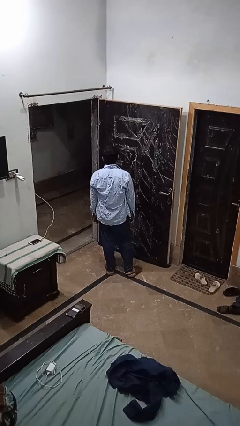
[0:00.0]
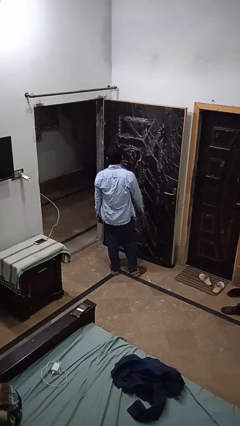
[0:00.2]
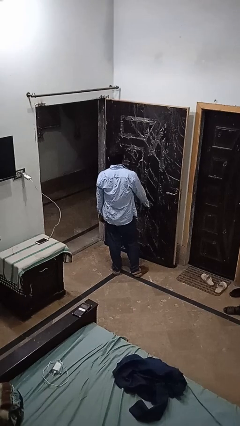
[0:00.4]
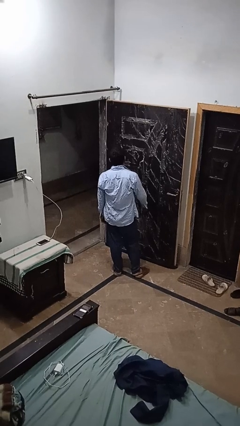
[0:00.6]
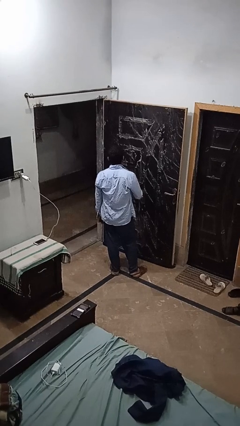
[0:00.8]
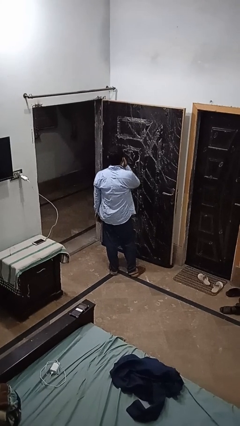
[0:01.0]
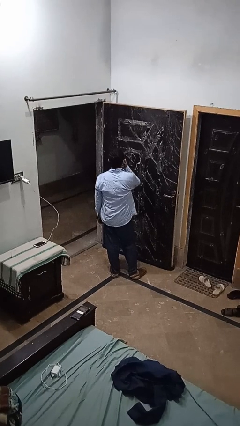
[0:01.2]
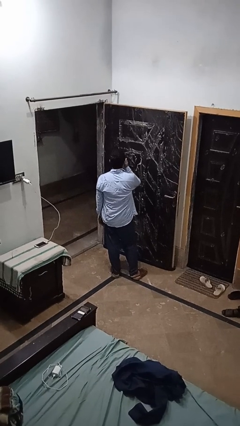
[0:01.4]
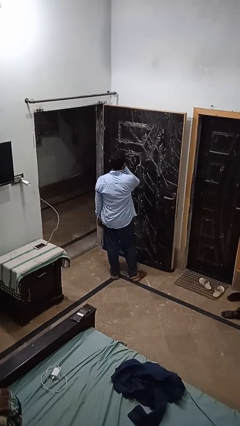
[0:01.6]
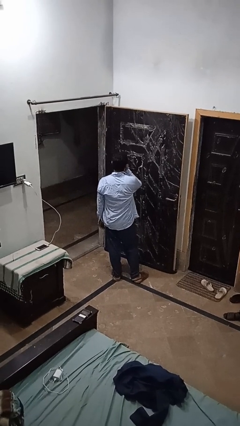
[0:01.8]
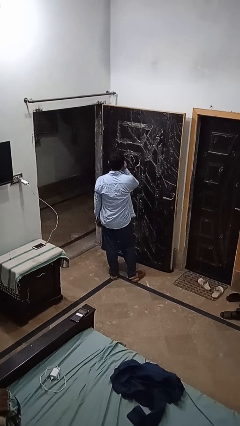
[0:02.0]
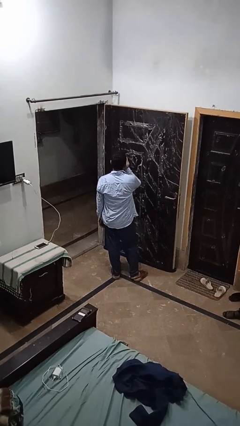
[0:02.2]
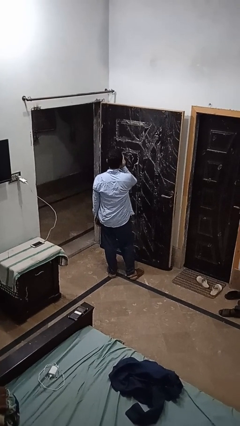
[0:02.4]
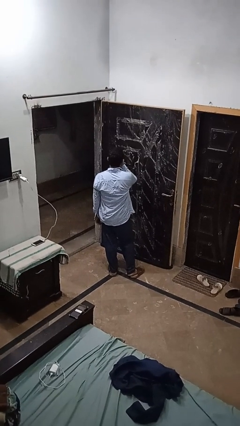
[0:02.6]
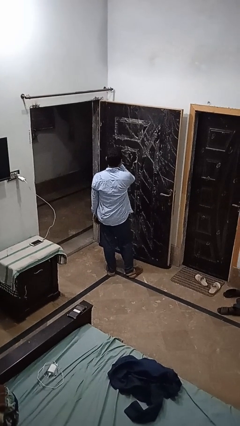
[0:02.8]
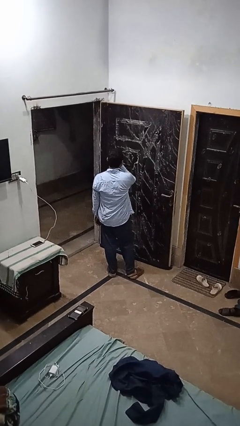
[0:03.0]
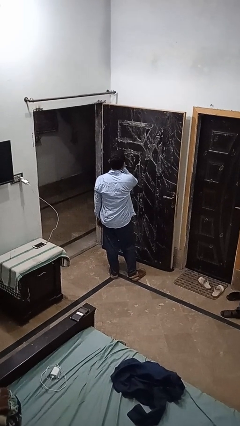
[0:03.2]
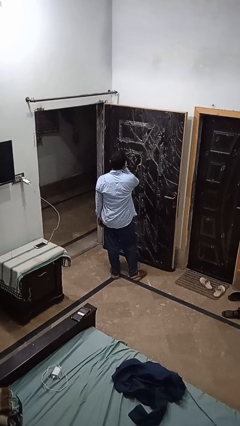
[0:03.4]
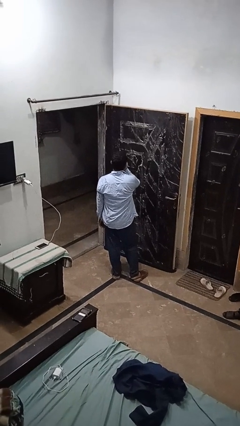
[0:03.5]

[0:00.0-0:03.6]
person licks fingers

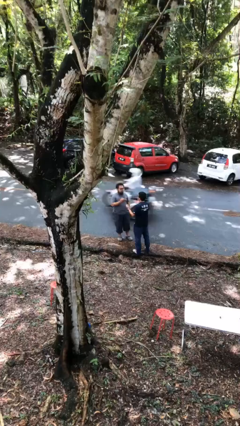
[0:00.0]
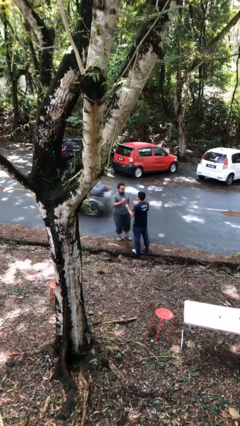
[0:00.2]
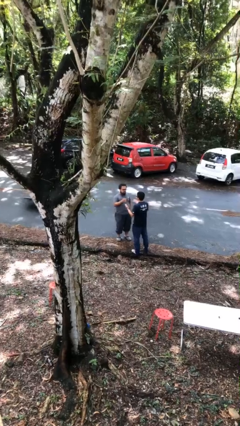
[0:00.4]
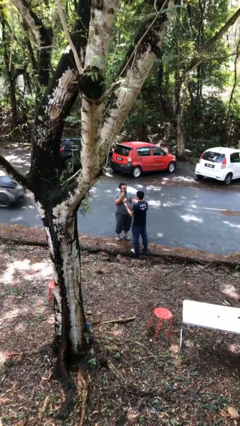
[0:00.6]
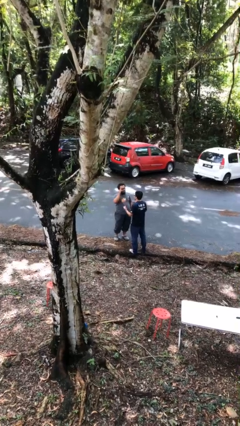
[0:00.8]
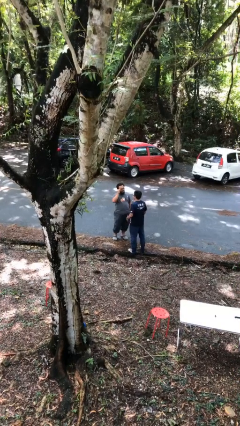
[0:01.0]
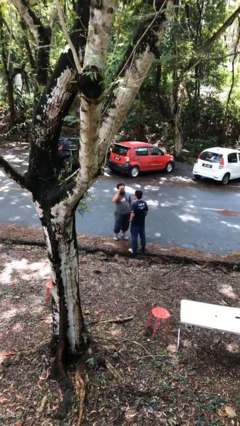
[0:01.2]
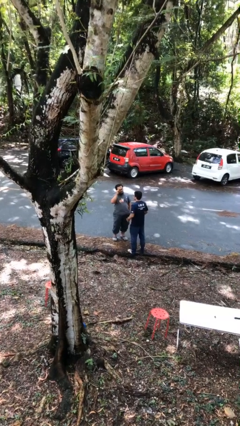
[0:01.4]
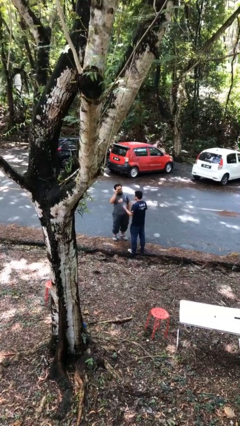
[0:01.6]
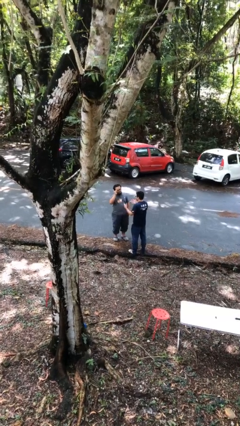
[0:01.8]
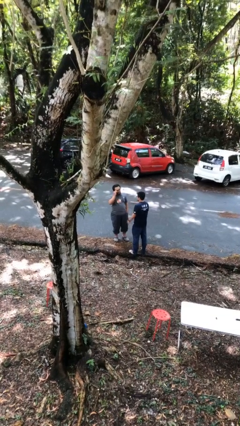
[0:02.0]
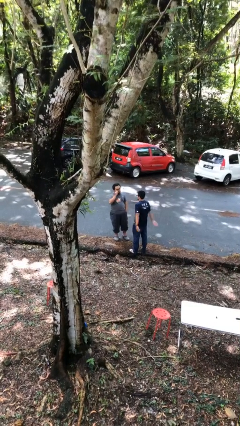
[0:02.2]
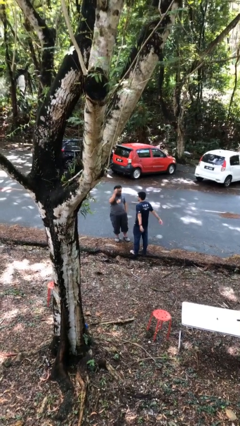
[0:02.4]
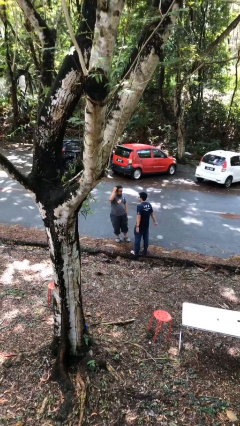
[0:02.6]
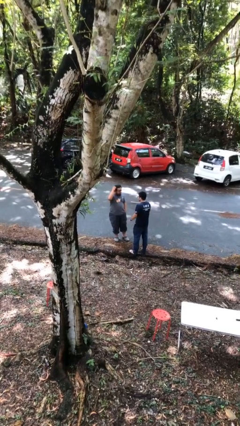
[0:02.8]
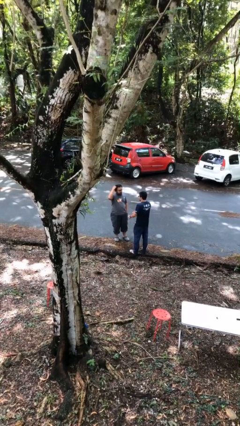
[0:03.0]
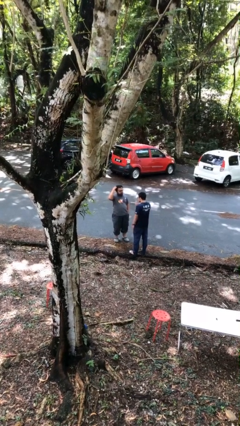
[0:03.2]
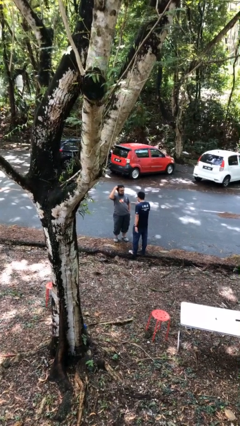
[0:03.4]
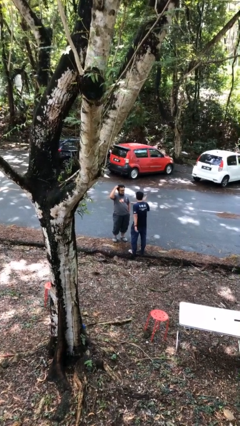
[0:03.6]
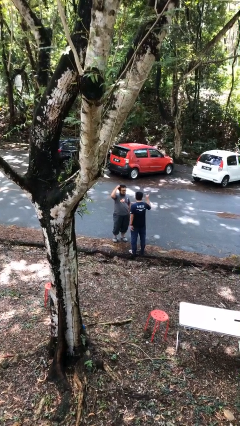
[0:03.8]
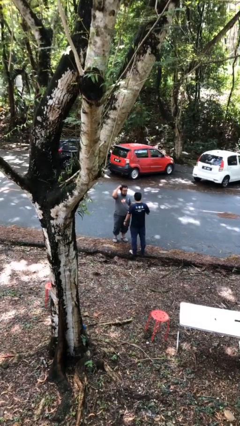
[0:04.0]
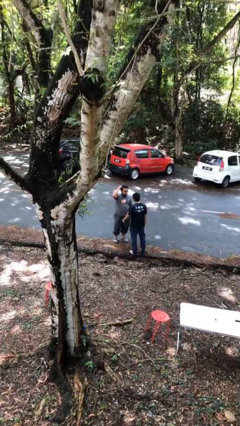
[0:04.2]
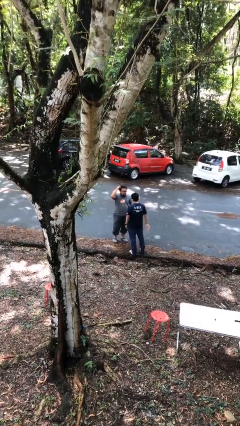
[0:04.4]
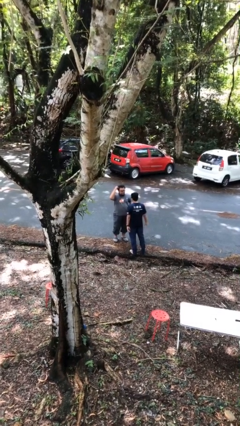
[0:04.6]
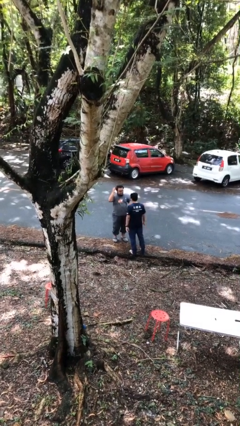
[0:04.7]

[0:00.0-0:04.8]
person talks to person

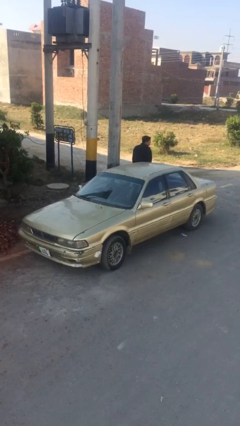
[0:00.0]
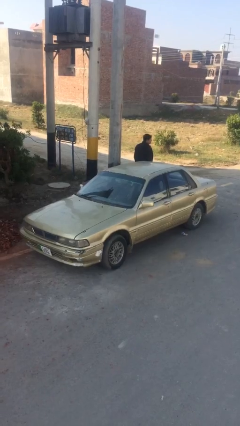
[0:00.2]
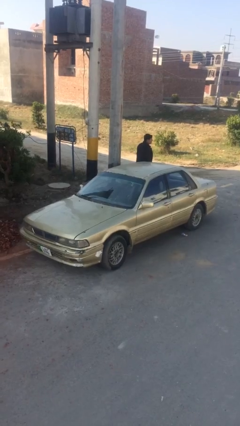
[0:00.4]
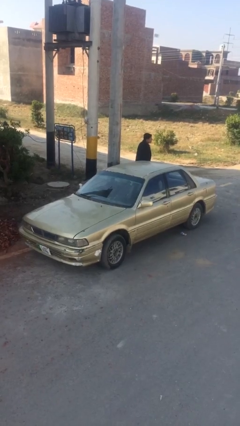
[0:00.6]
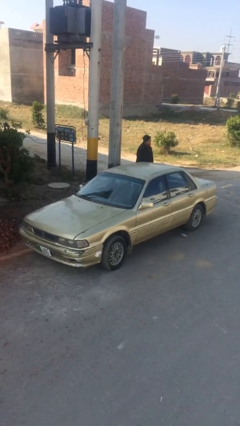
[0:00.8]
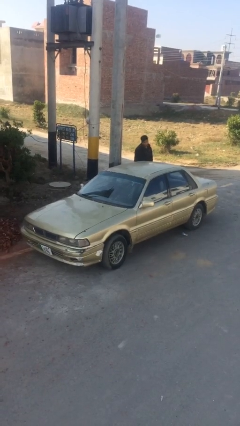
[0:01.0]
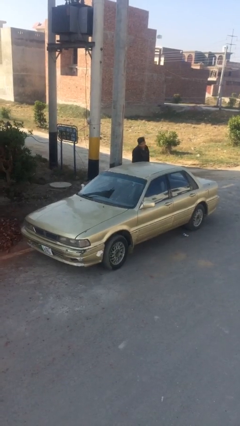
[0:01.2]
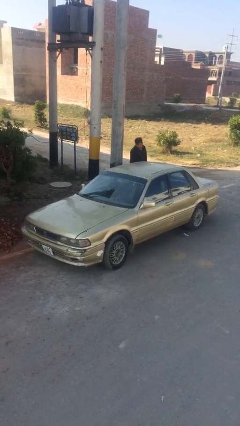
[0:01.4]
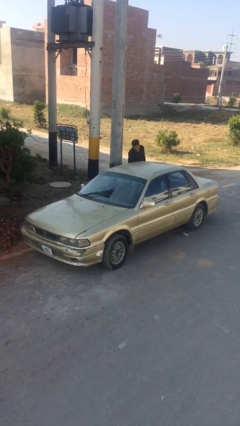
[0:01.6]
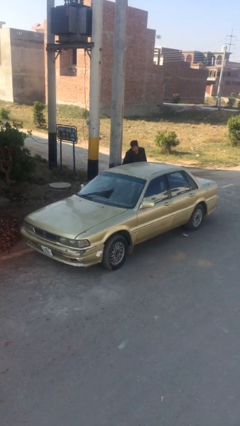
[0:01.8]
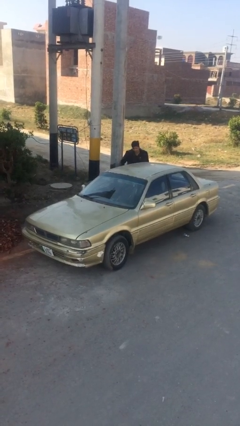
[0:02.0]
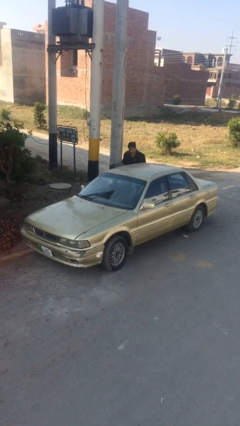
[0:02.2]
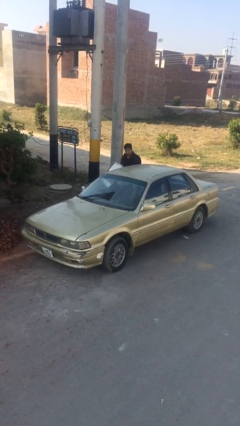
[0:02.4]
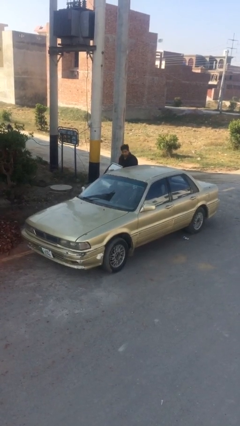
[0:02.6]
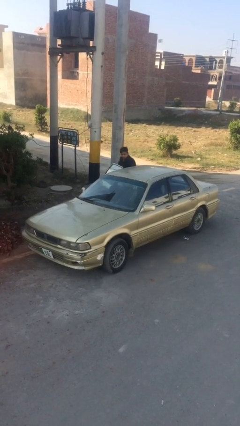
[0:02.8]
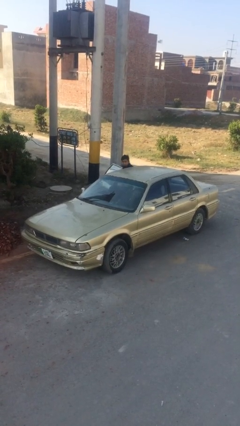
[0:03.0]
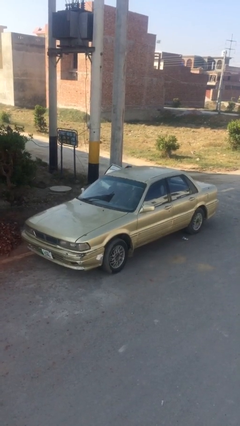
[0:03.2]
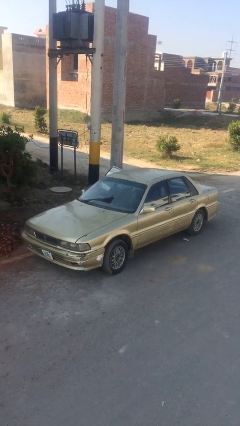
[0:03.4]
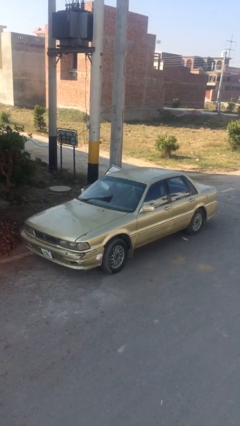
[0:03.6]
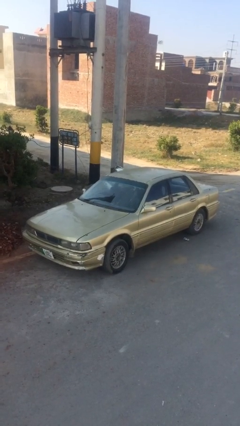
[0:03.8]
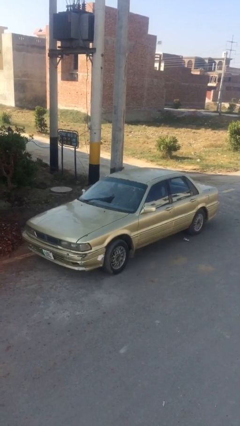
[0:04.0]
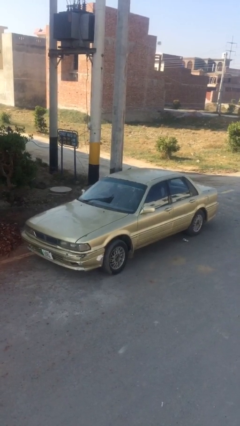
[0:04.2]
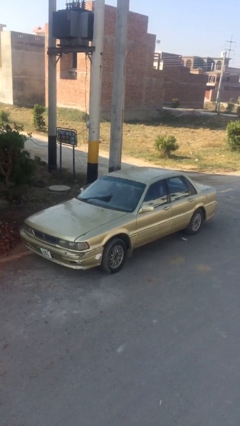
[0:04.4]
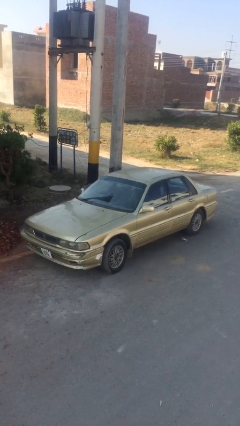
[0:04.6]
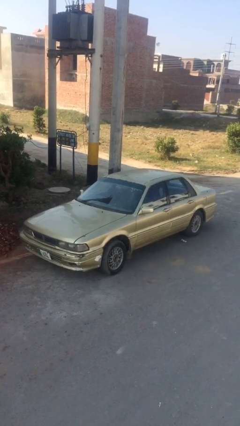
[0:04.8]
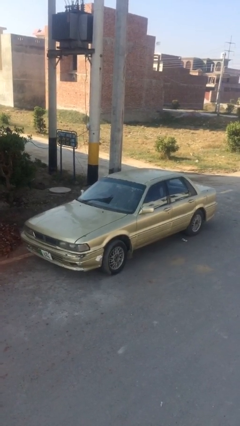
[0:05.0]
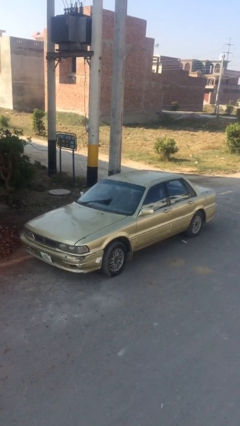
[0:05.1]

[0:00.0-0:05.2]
car picks up person

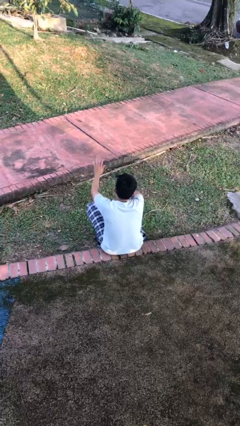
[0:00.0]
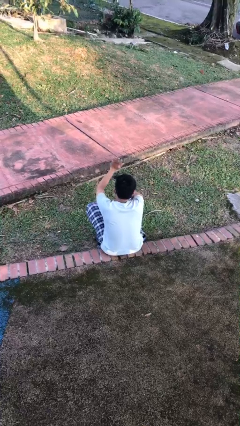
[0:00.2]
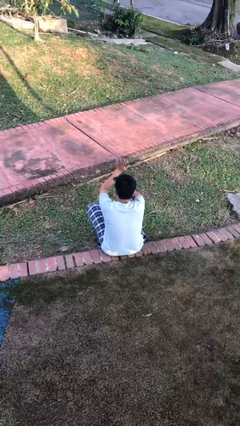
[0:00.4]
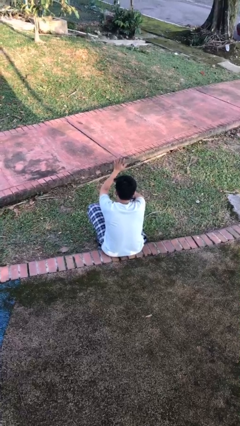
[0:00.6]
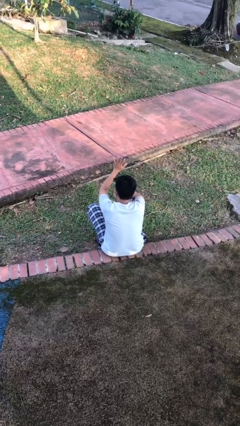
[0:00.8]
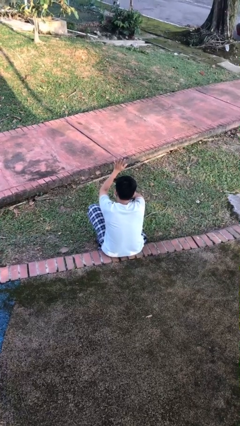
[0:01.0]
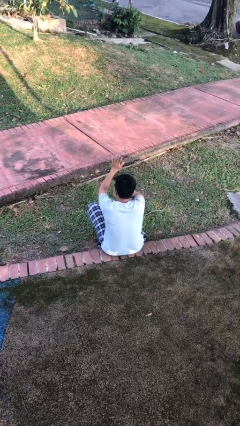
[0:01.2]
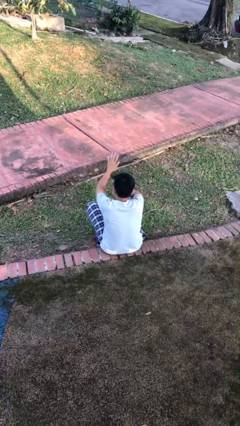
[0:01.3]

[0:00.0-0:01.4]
person gestures stop

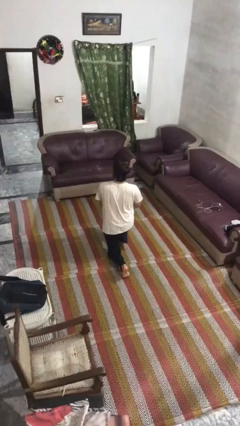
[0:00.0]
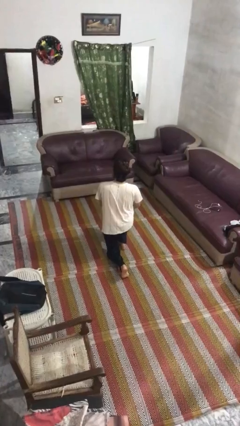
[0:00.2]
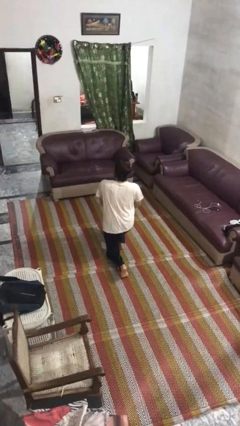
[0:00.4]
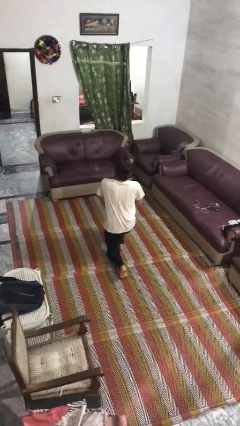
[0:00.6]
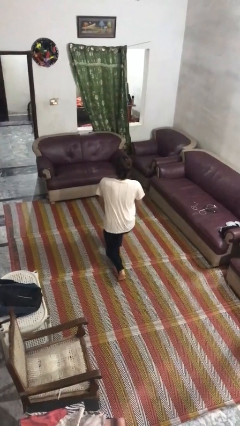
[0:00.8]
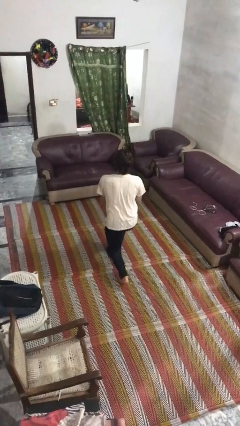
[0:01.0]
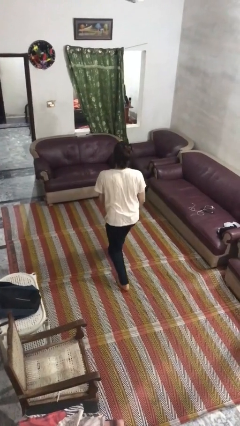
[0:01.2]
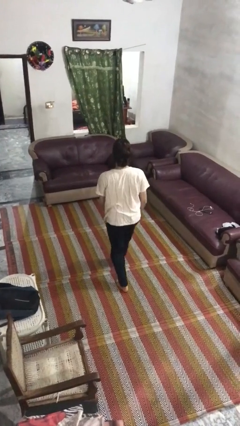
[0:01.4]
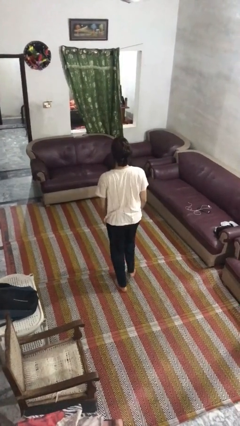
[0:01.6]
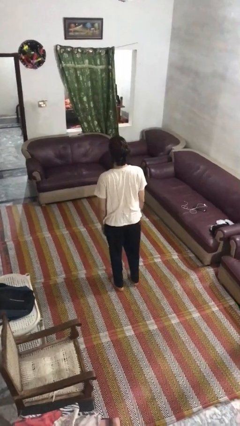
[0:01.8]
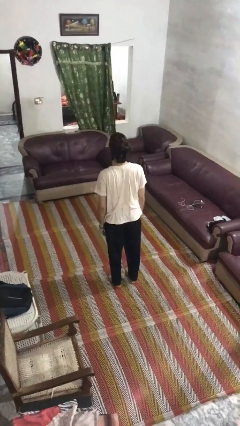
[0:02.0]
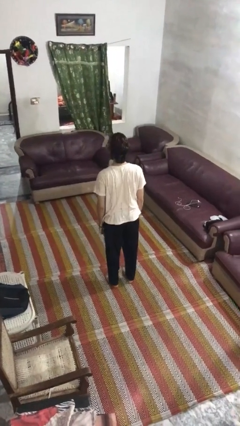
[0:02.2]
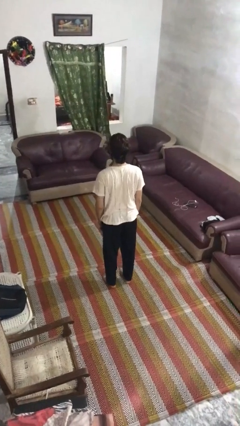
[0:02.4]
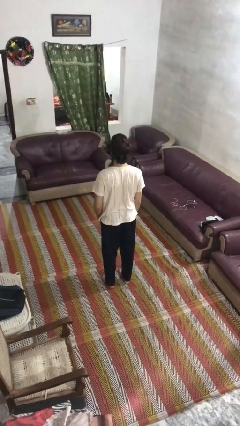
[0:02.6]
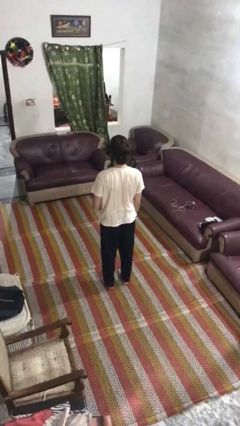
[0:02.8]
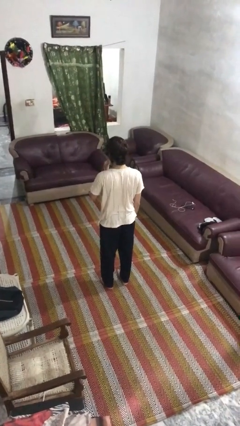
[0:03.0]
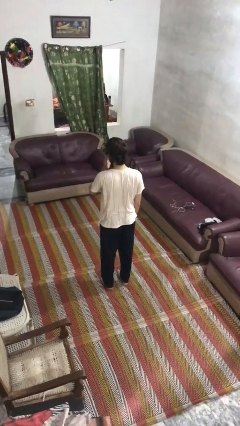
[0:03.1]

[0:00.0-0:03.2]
person stands up from floor
